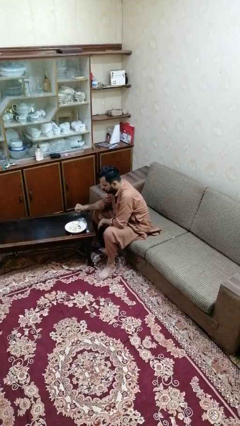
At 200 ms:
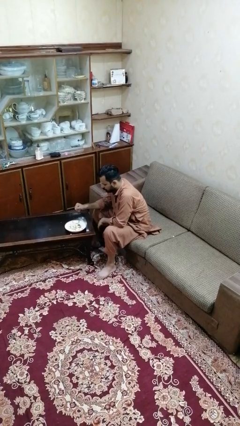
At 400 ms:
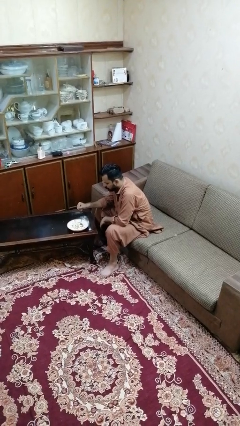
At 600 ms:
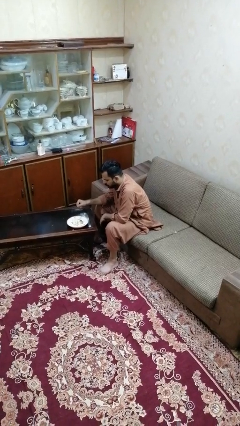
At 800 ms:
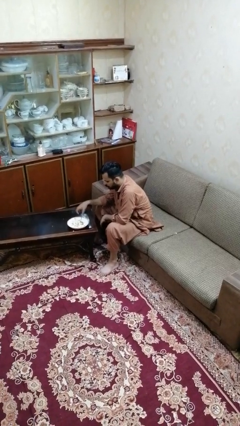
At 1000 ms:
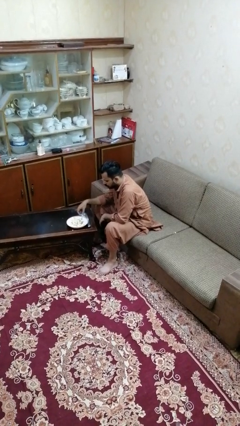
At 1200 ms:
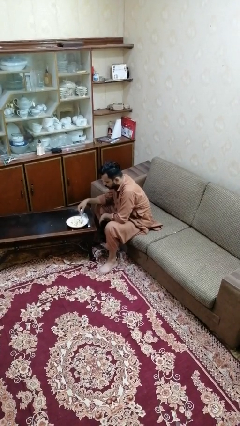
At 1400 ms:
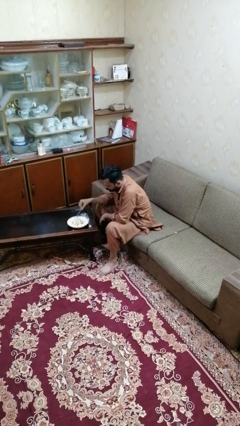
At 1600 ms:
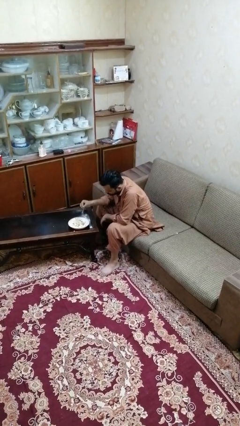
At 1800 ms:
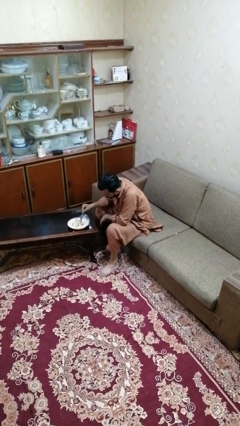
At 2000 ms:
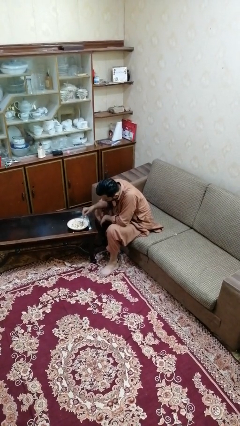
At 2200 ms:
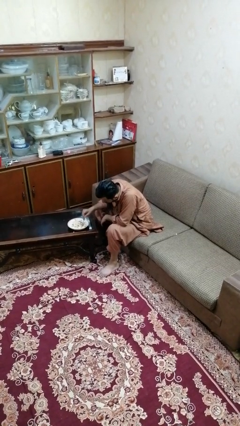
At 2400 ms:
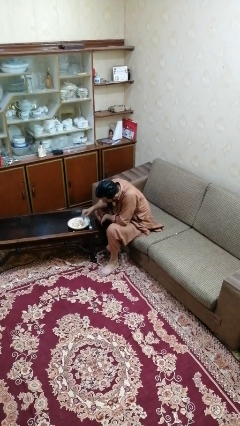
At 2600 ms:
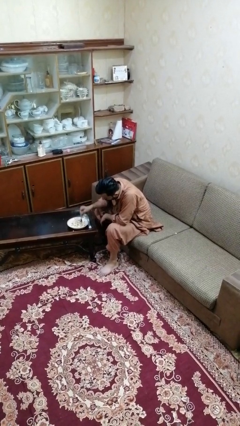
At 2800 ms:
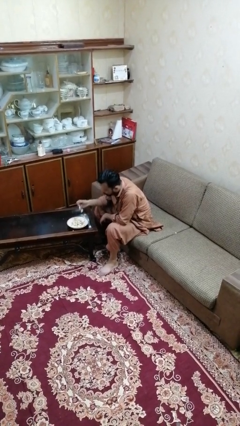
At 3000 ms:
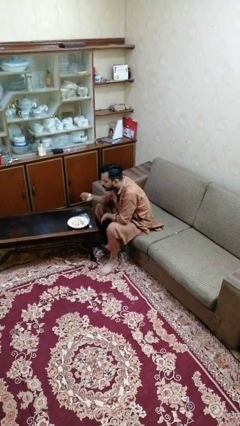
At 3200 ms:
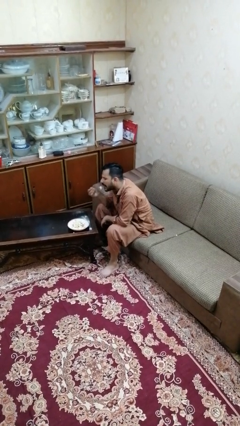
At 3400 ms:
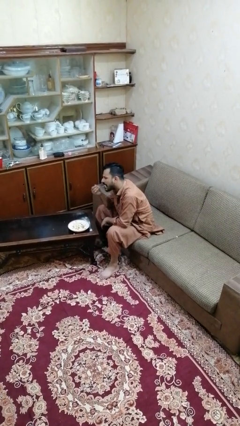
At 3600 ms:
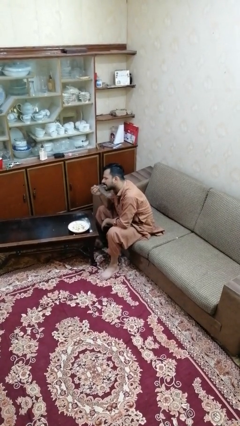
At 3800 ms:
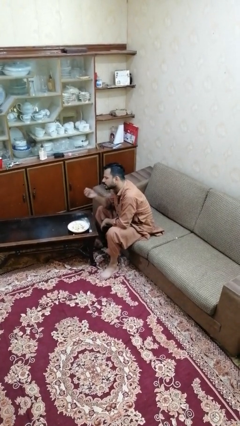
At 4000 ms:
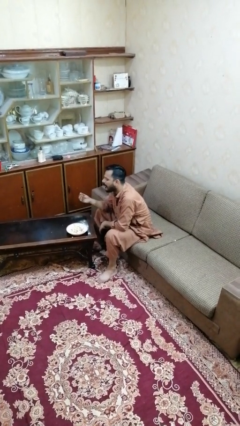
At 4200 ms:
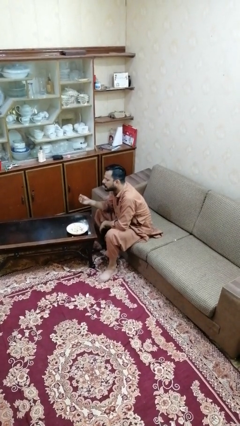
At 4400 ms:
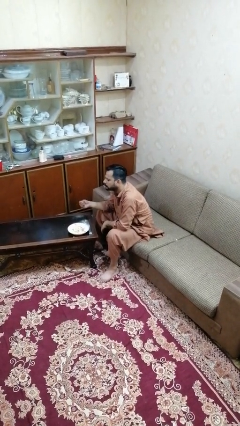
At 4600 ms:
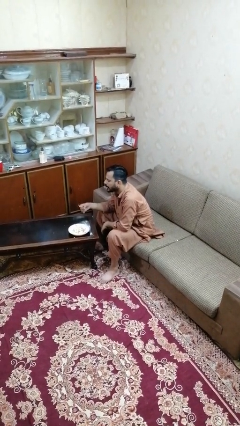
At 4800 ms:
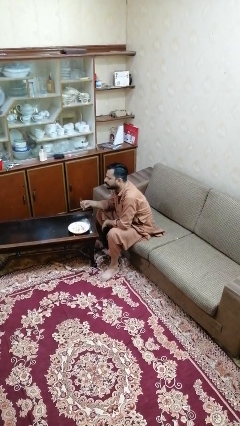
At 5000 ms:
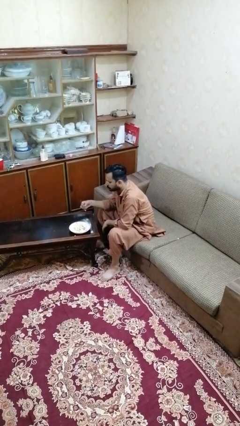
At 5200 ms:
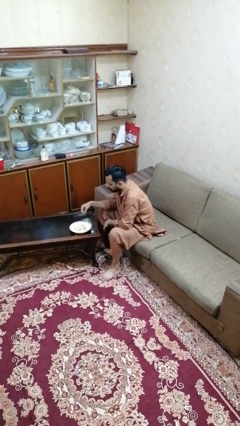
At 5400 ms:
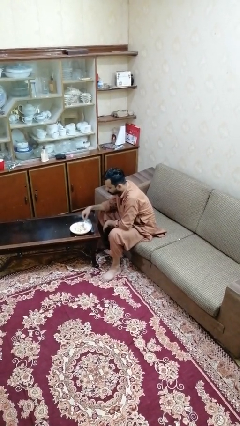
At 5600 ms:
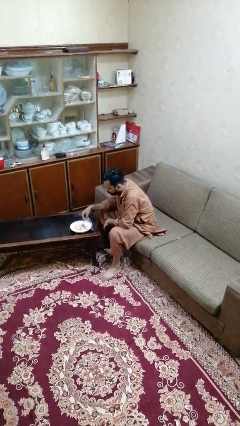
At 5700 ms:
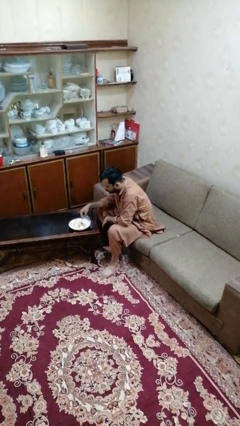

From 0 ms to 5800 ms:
person eats with utensil

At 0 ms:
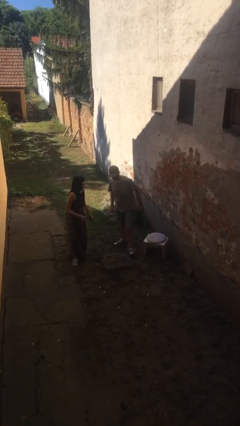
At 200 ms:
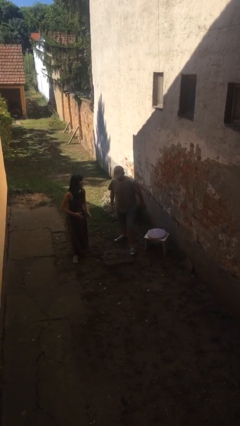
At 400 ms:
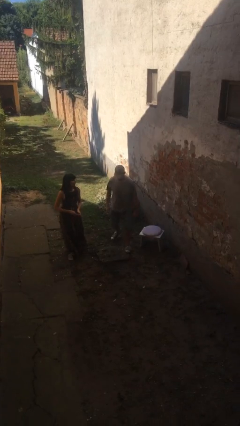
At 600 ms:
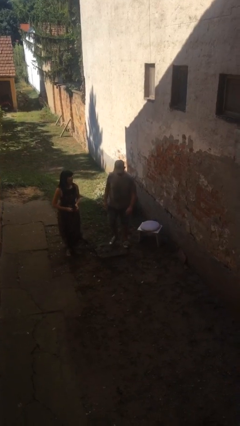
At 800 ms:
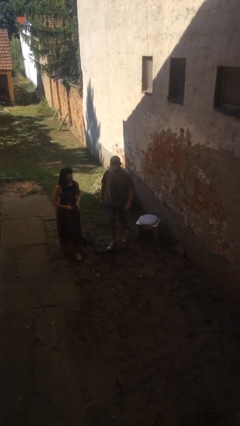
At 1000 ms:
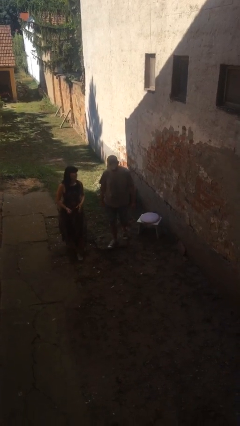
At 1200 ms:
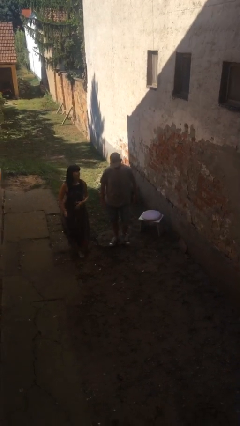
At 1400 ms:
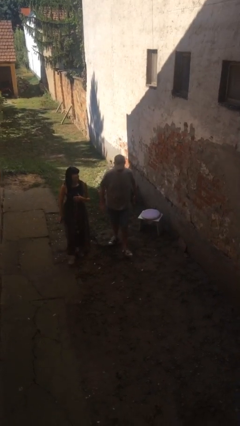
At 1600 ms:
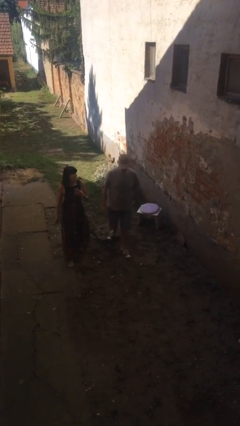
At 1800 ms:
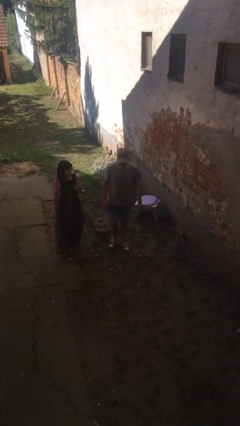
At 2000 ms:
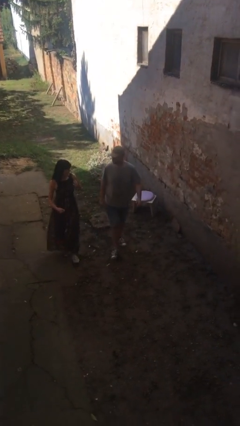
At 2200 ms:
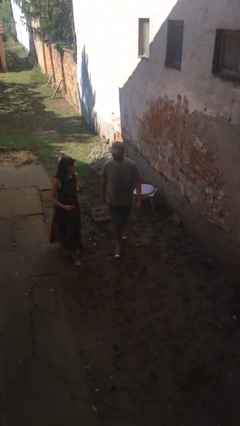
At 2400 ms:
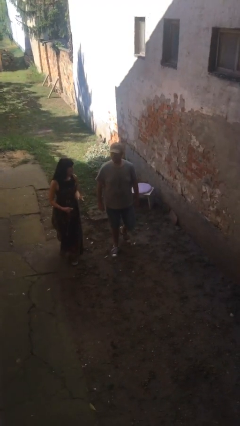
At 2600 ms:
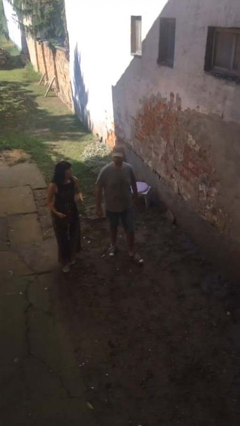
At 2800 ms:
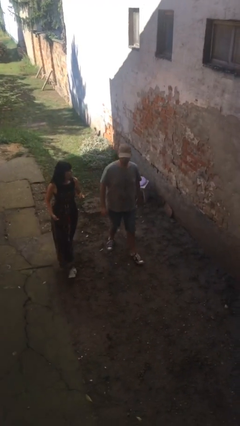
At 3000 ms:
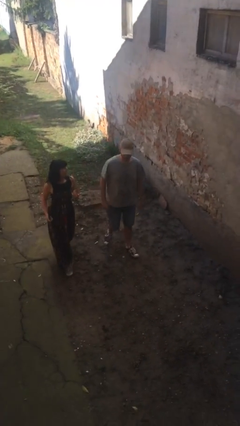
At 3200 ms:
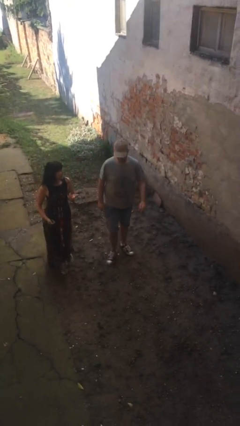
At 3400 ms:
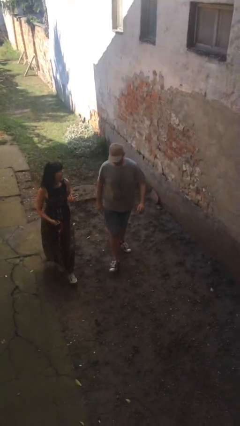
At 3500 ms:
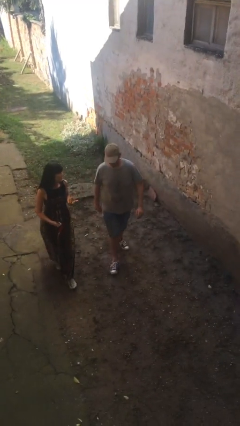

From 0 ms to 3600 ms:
person talks to person

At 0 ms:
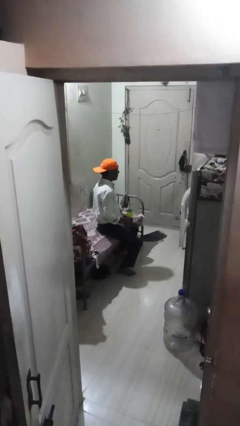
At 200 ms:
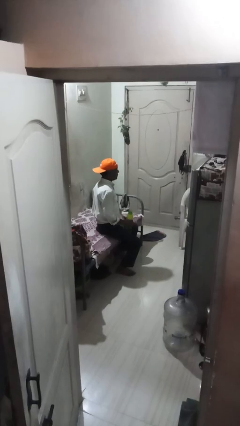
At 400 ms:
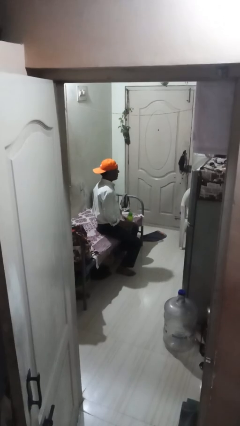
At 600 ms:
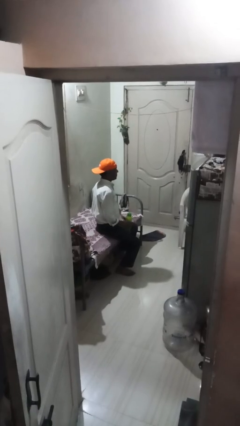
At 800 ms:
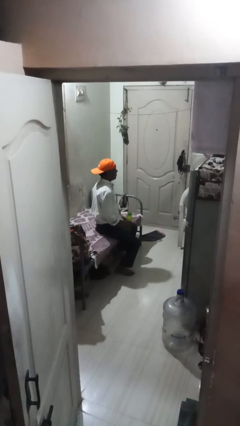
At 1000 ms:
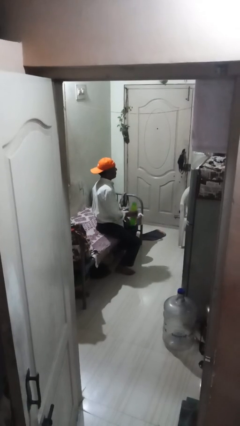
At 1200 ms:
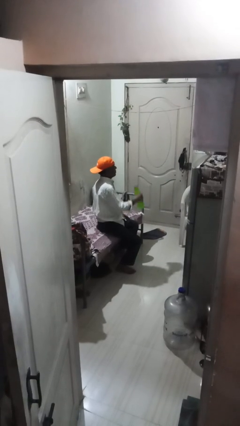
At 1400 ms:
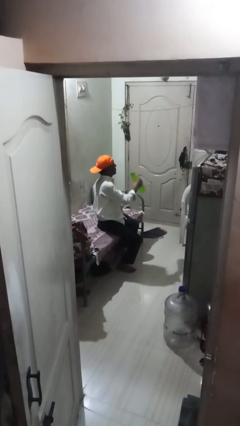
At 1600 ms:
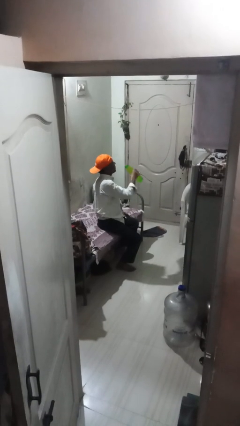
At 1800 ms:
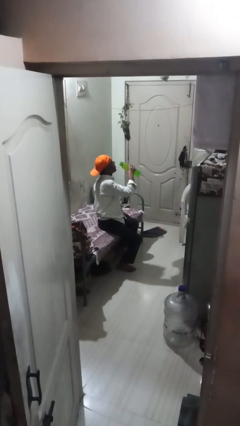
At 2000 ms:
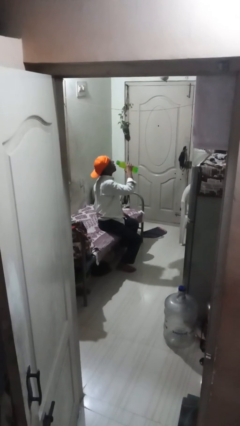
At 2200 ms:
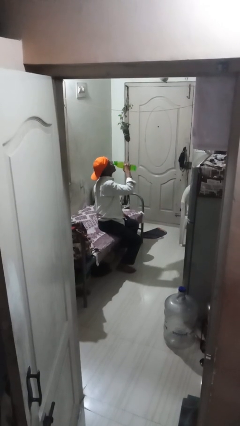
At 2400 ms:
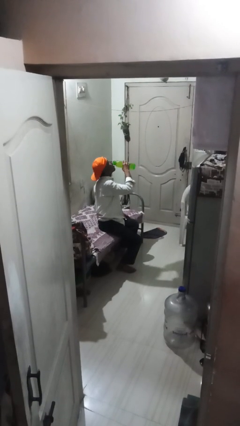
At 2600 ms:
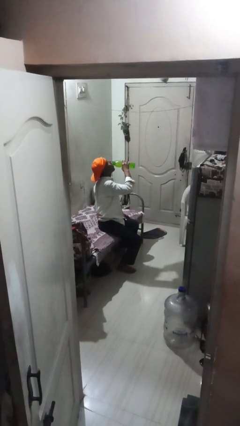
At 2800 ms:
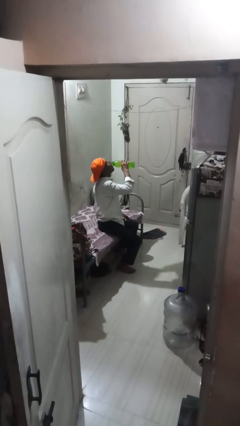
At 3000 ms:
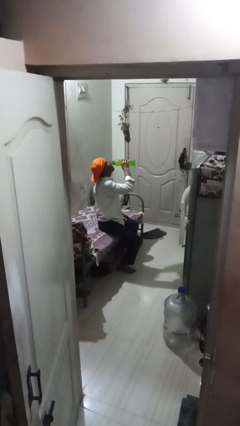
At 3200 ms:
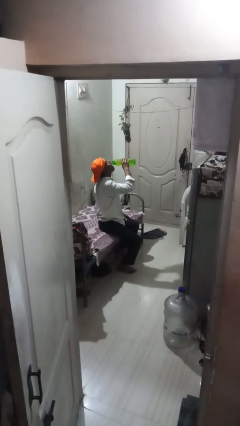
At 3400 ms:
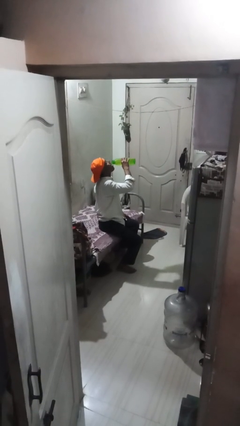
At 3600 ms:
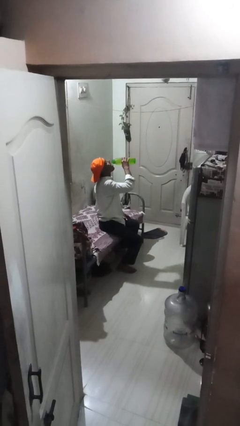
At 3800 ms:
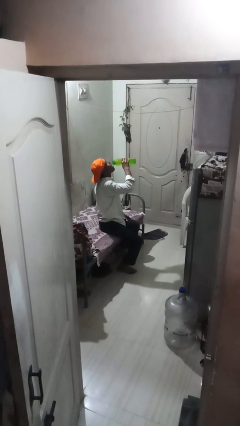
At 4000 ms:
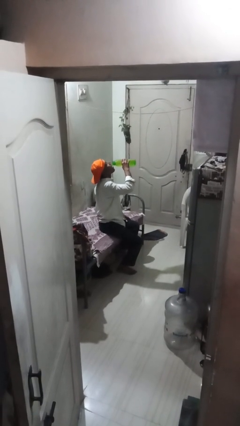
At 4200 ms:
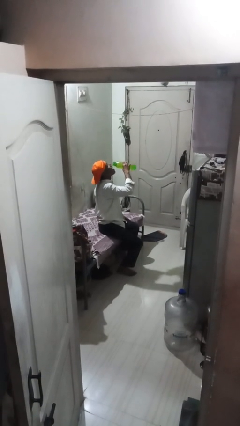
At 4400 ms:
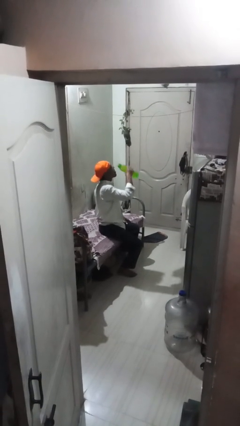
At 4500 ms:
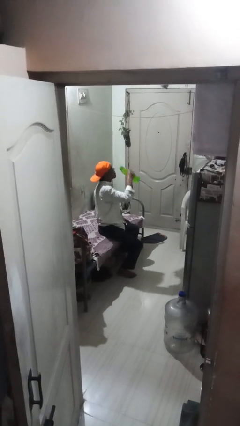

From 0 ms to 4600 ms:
person drinks from bottle

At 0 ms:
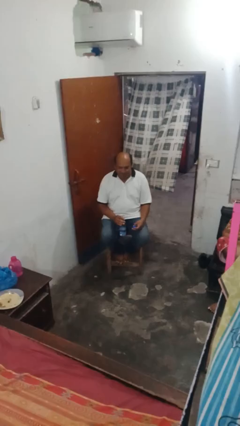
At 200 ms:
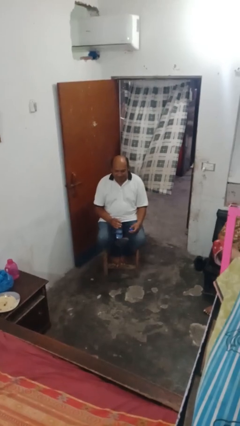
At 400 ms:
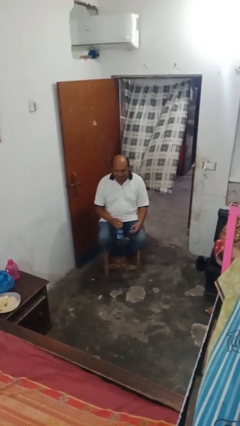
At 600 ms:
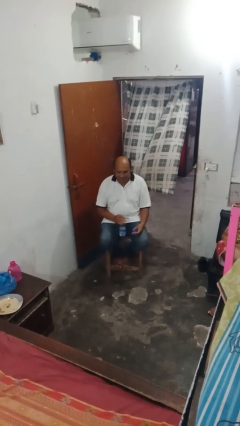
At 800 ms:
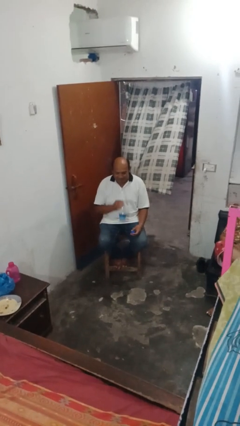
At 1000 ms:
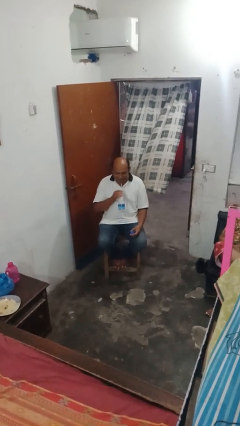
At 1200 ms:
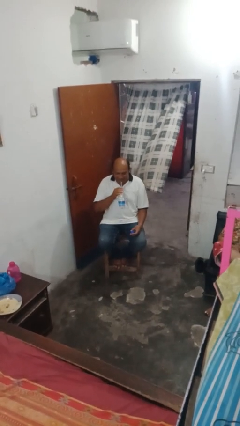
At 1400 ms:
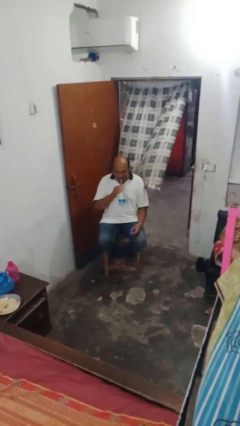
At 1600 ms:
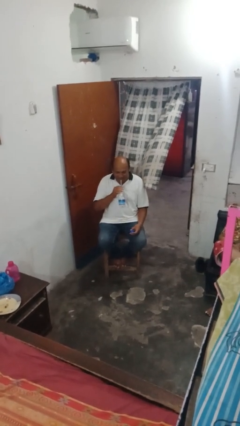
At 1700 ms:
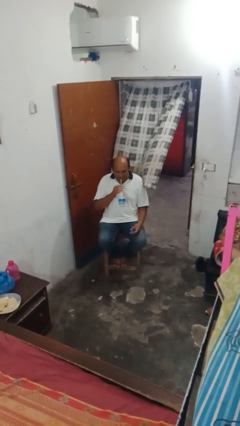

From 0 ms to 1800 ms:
person drinks from straw

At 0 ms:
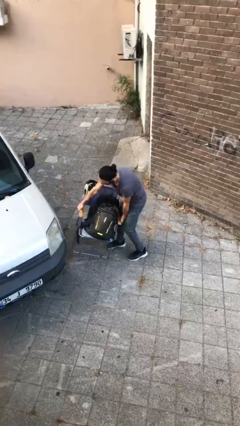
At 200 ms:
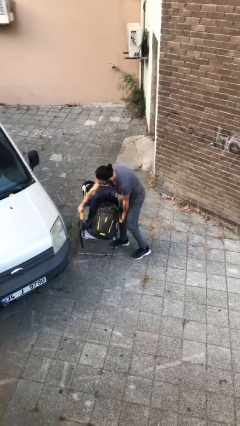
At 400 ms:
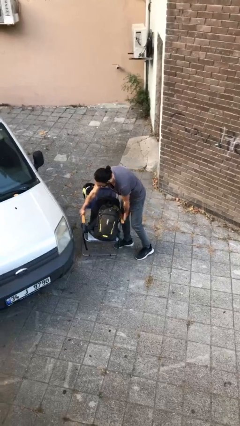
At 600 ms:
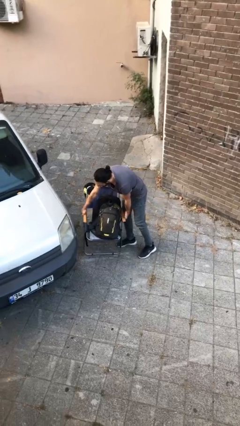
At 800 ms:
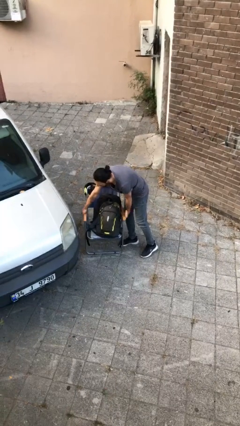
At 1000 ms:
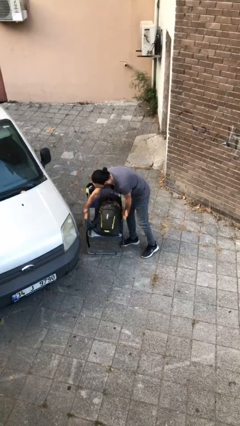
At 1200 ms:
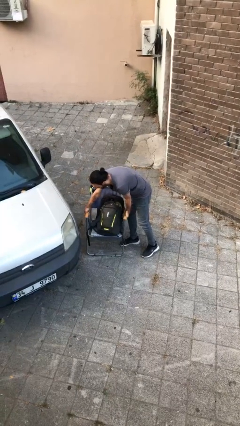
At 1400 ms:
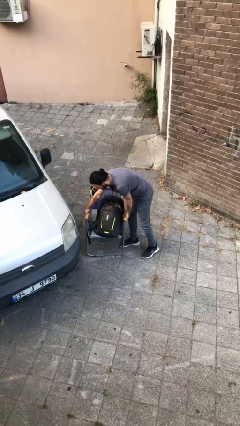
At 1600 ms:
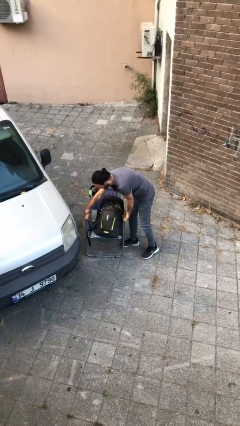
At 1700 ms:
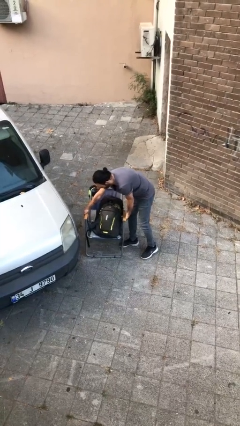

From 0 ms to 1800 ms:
person puts down object on floor
